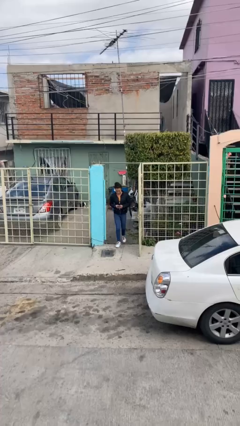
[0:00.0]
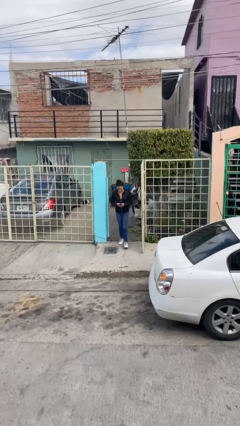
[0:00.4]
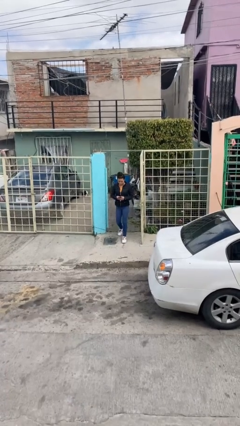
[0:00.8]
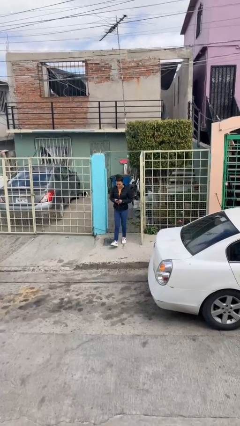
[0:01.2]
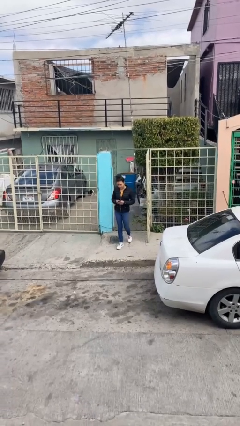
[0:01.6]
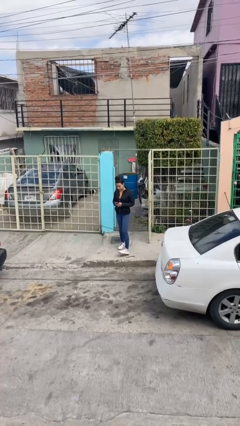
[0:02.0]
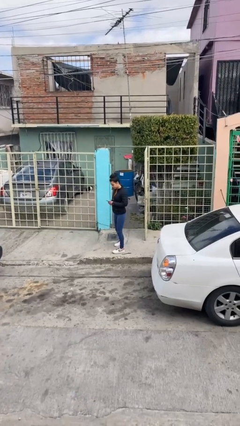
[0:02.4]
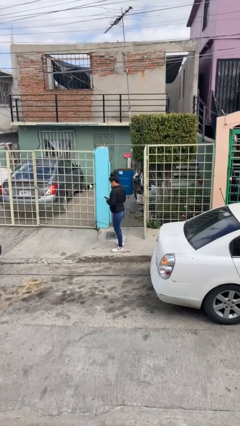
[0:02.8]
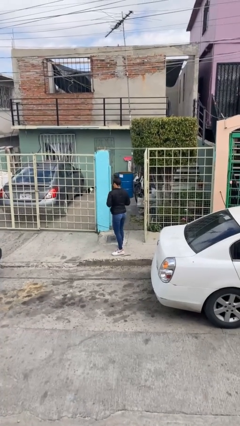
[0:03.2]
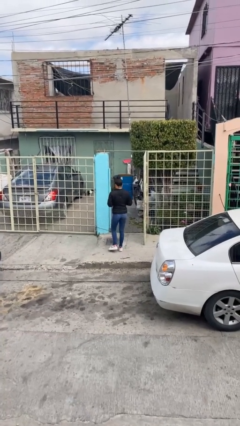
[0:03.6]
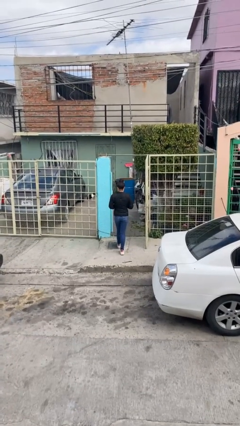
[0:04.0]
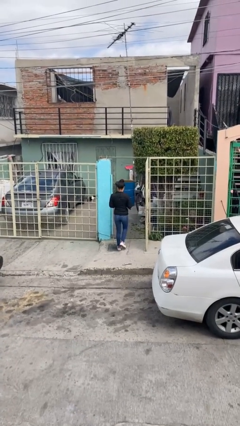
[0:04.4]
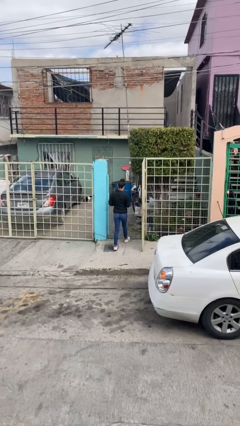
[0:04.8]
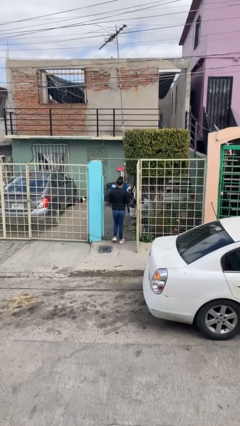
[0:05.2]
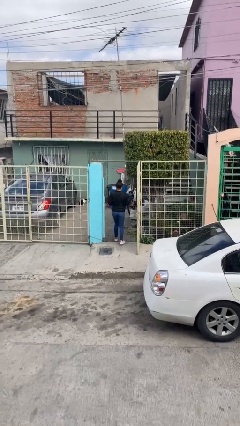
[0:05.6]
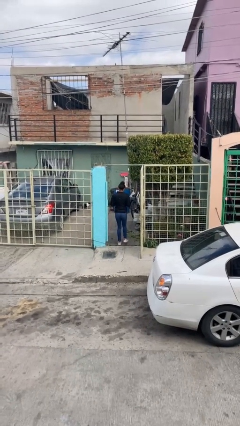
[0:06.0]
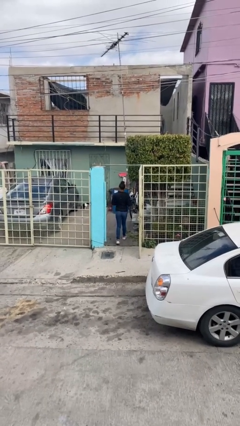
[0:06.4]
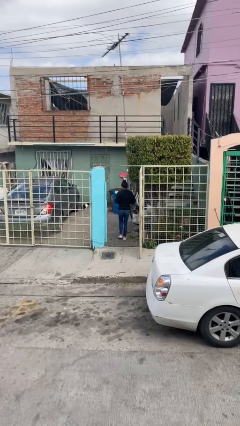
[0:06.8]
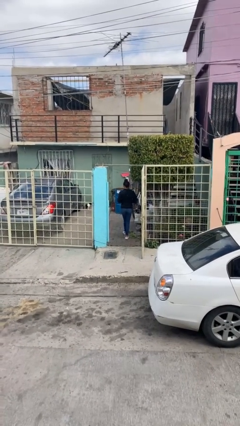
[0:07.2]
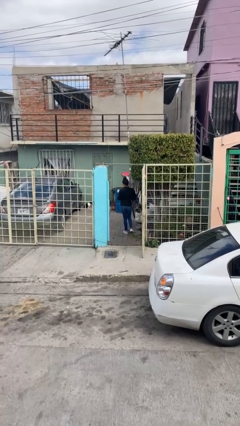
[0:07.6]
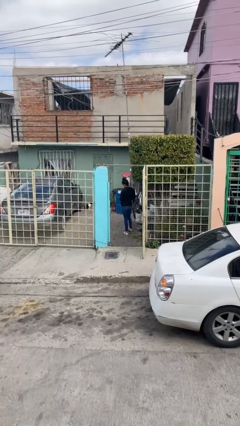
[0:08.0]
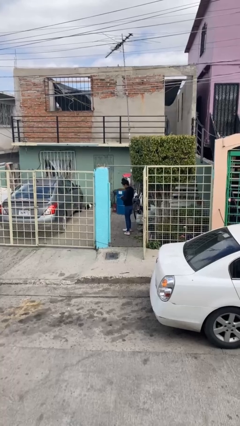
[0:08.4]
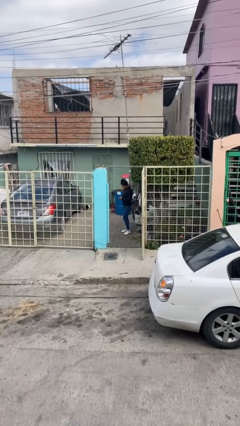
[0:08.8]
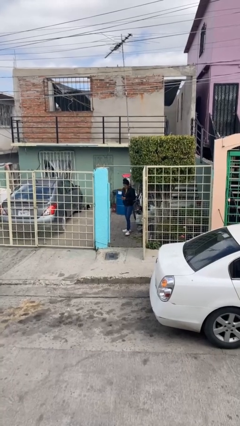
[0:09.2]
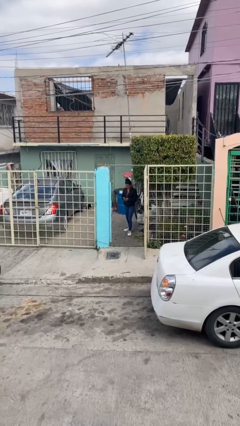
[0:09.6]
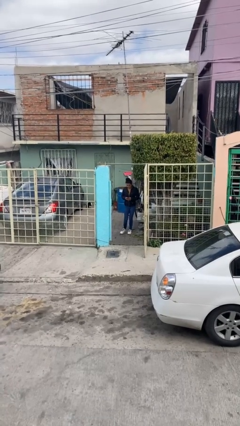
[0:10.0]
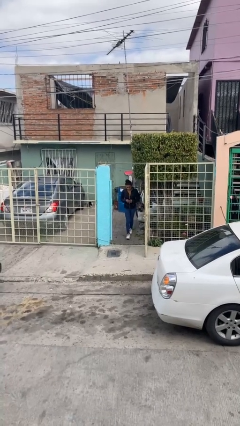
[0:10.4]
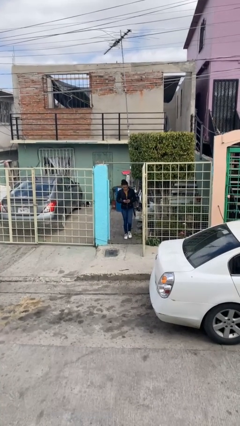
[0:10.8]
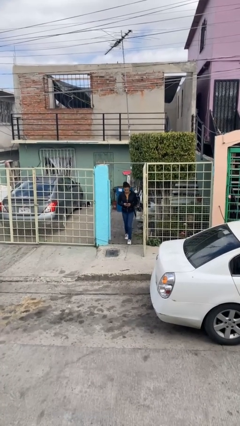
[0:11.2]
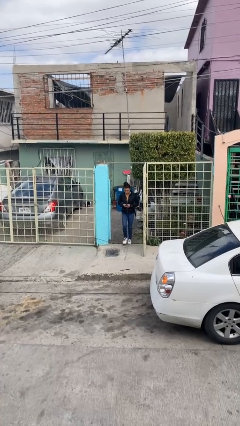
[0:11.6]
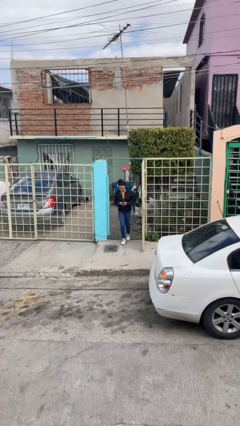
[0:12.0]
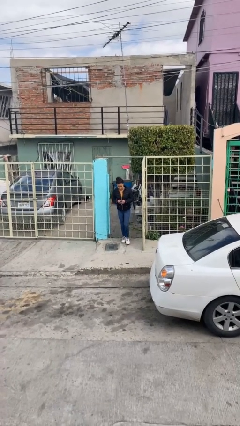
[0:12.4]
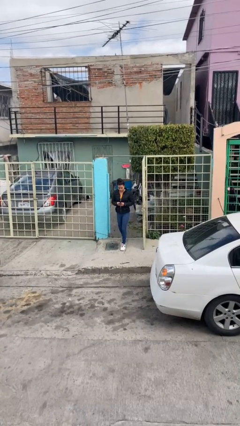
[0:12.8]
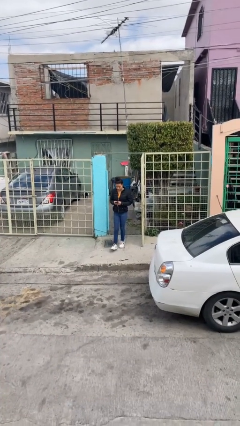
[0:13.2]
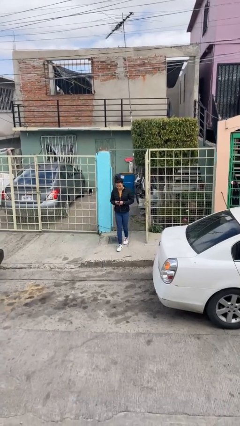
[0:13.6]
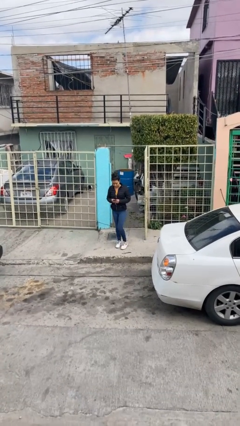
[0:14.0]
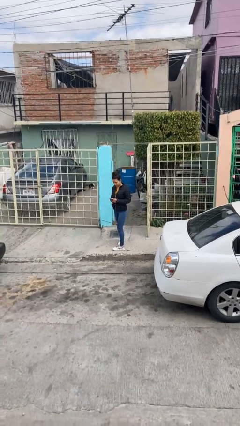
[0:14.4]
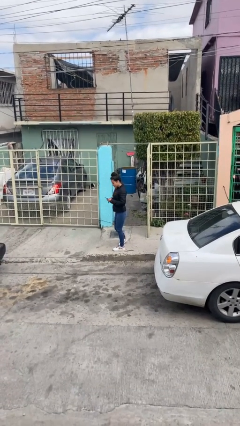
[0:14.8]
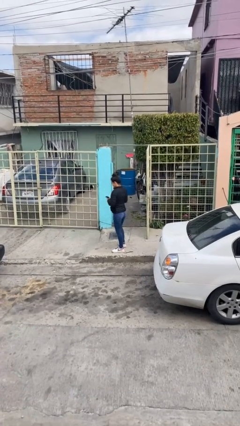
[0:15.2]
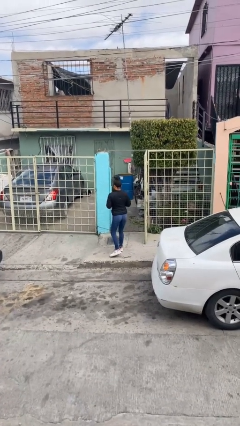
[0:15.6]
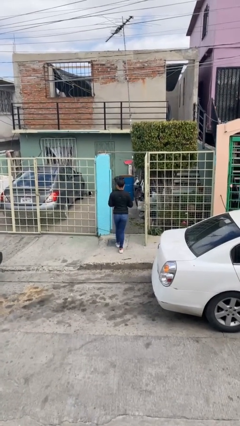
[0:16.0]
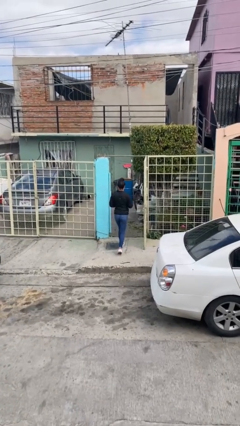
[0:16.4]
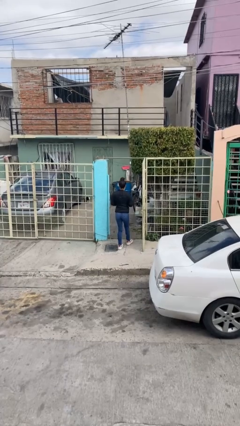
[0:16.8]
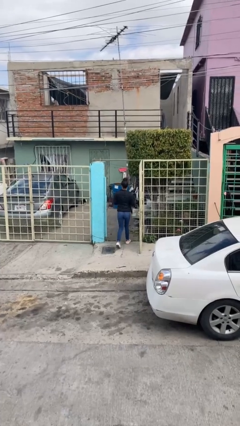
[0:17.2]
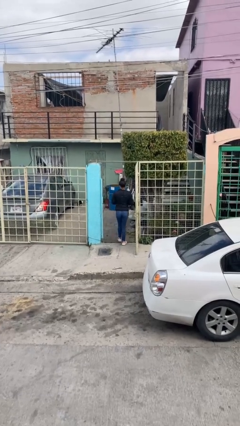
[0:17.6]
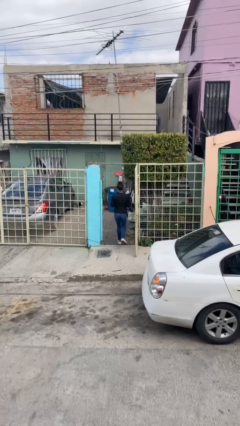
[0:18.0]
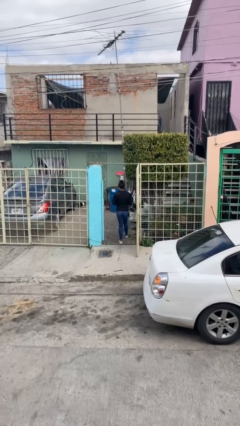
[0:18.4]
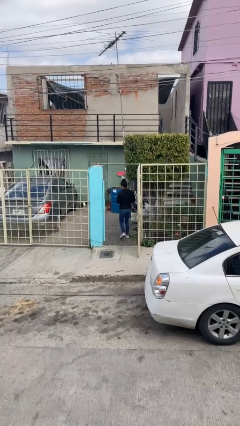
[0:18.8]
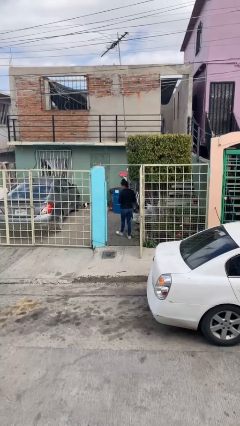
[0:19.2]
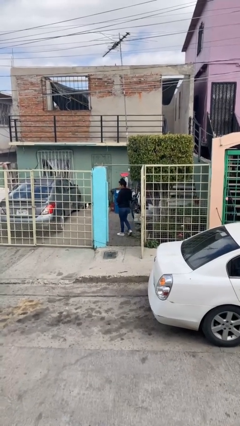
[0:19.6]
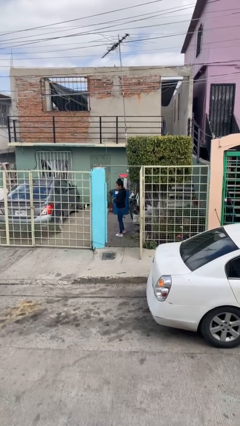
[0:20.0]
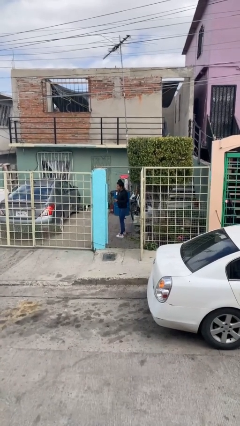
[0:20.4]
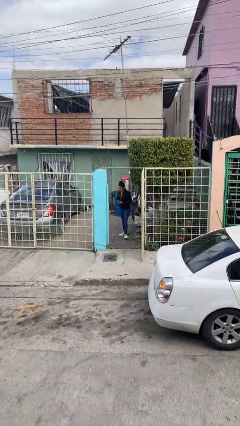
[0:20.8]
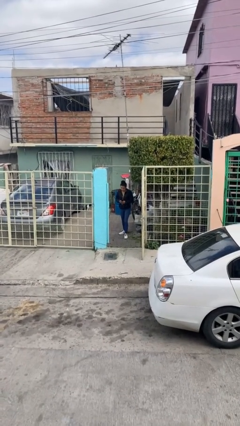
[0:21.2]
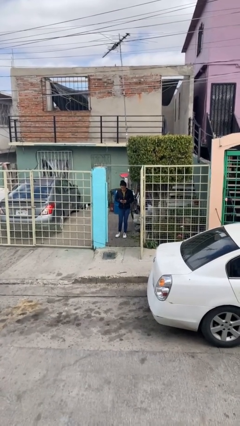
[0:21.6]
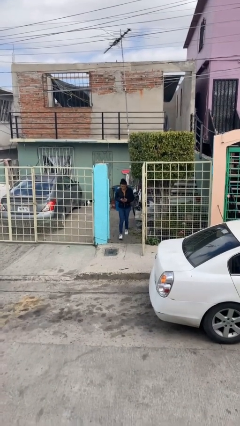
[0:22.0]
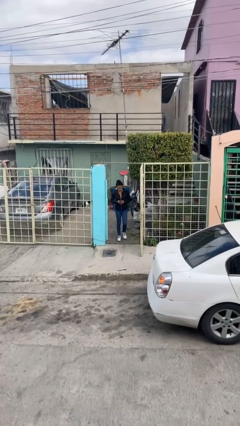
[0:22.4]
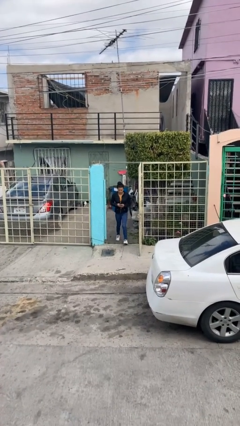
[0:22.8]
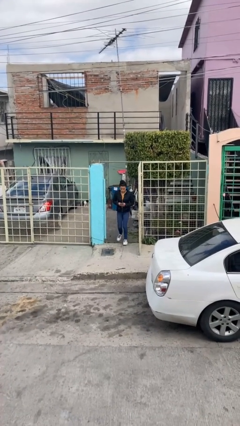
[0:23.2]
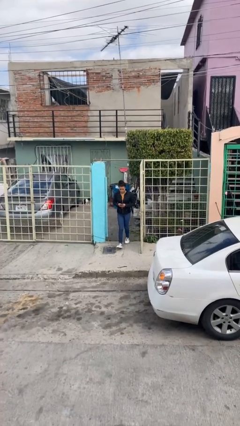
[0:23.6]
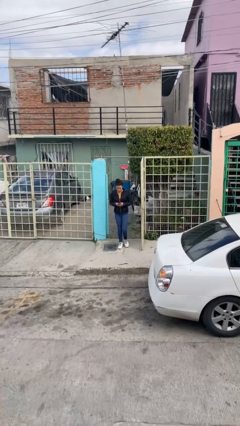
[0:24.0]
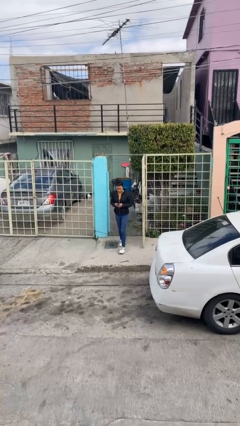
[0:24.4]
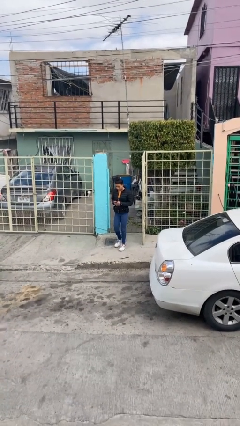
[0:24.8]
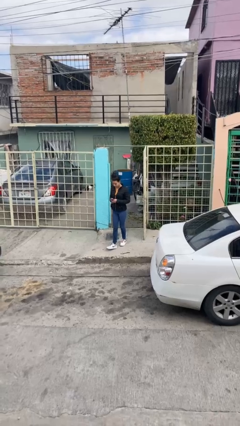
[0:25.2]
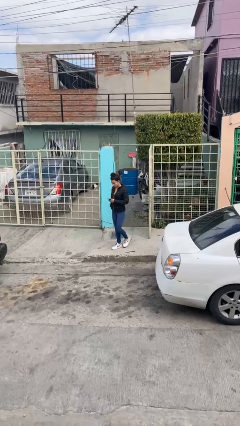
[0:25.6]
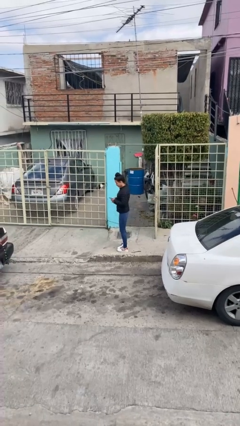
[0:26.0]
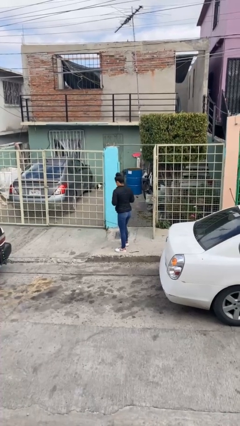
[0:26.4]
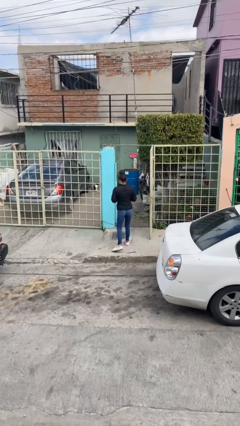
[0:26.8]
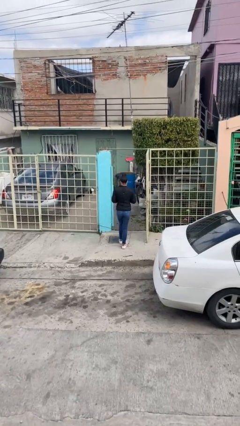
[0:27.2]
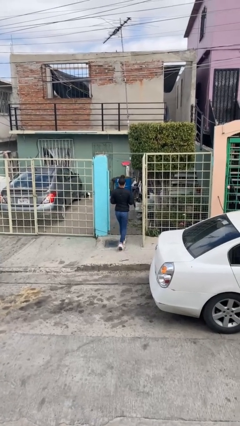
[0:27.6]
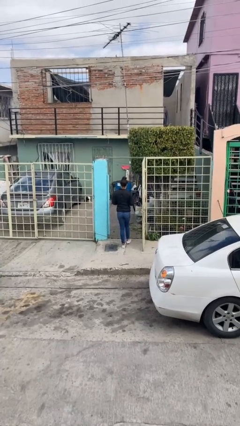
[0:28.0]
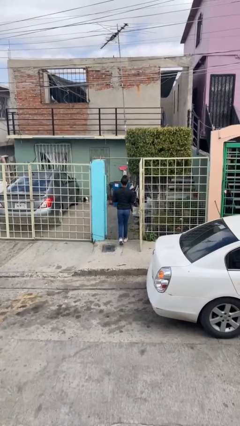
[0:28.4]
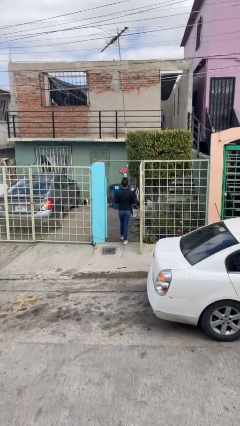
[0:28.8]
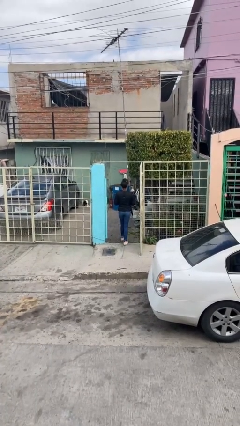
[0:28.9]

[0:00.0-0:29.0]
person texts on phone

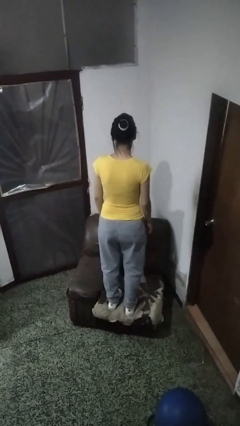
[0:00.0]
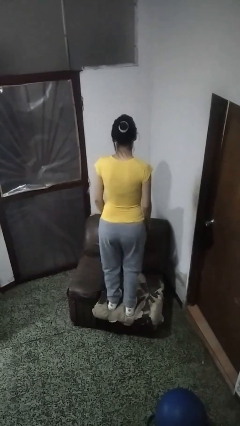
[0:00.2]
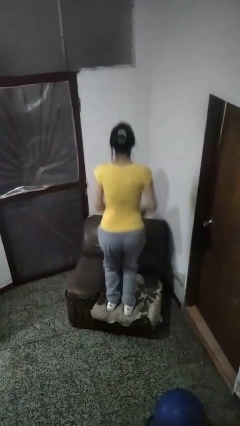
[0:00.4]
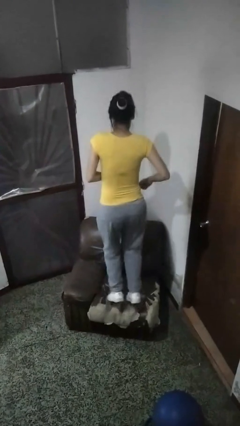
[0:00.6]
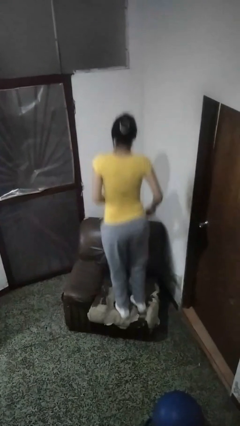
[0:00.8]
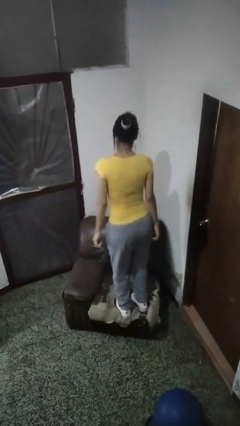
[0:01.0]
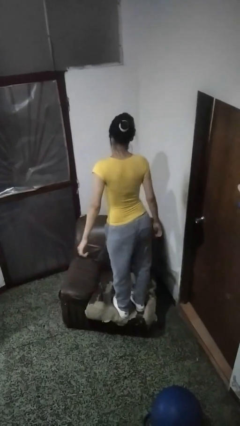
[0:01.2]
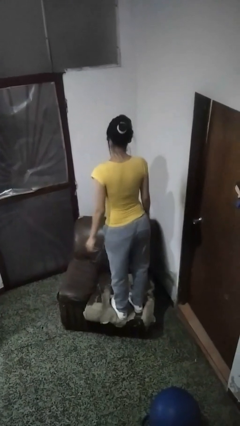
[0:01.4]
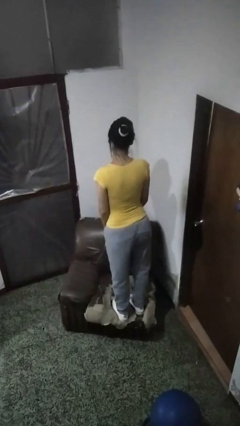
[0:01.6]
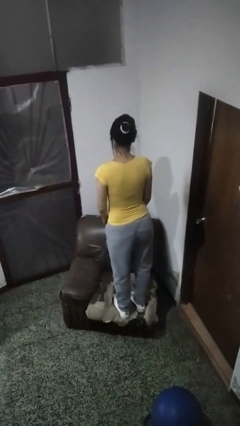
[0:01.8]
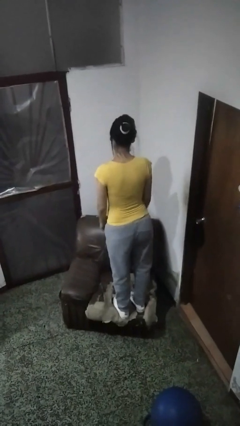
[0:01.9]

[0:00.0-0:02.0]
person jumps on couch

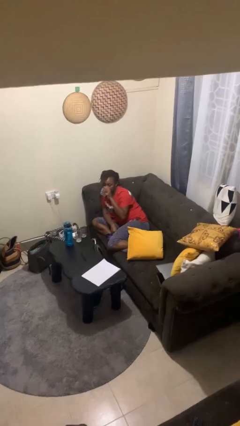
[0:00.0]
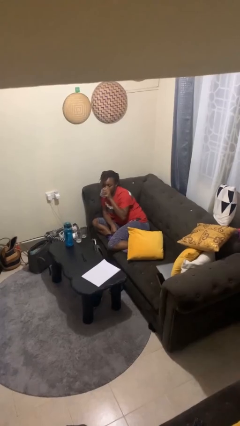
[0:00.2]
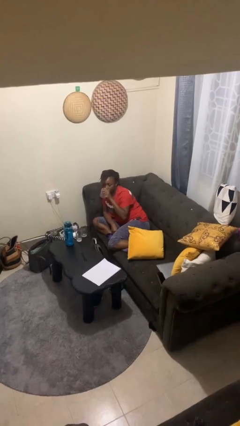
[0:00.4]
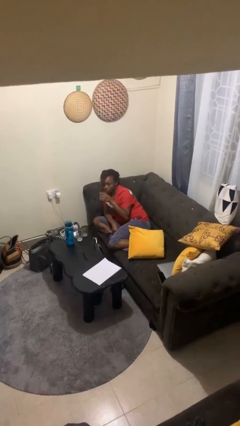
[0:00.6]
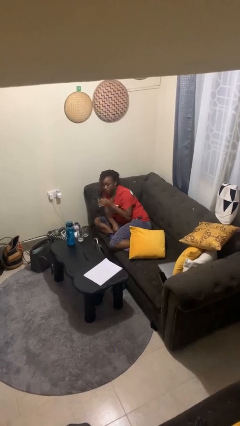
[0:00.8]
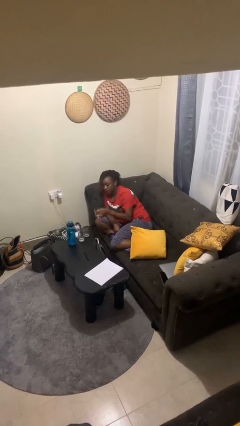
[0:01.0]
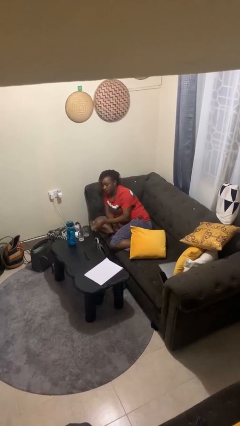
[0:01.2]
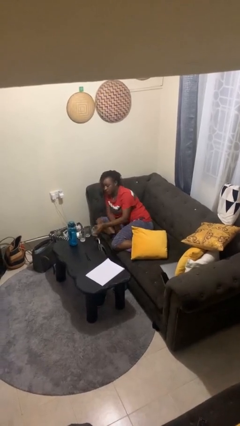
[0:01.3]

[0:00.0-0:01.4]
person puts down object on table
